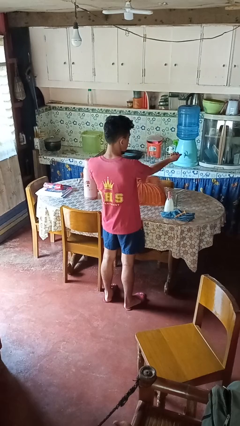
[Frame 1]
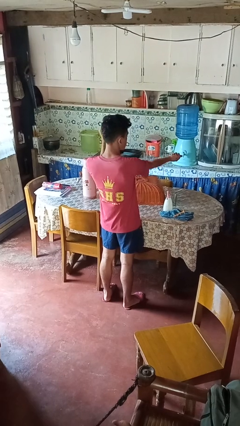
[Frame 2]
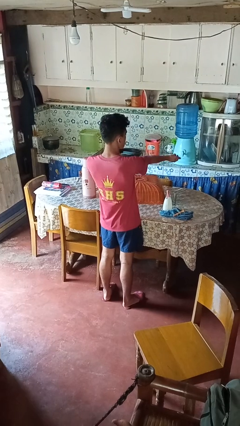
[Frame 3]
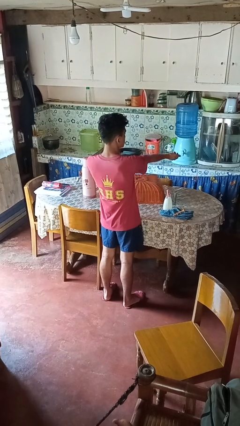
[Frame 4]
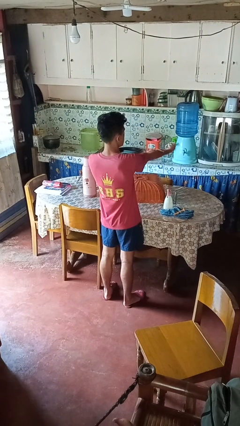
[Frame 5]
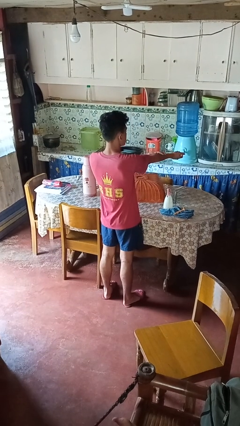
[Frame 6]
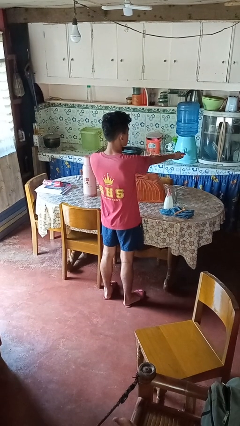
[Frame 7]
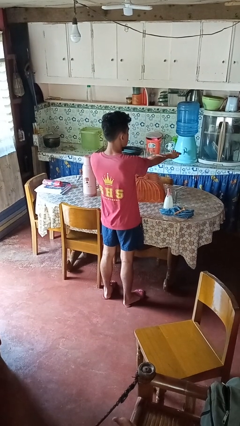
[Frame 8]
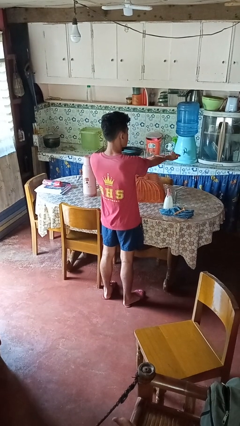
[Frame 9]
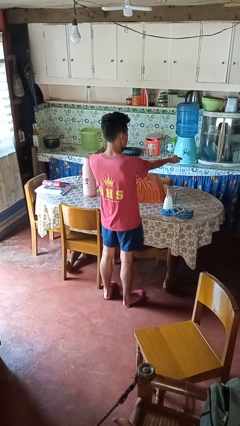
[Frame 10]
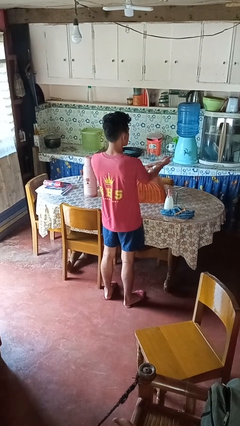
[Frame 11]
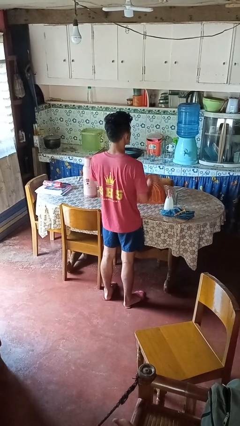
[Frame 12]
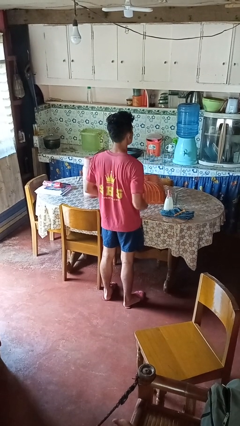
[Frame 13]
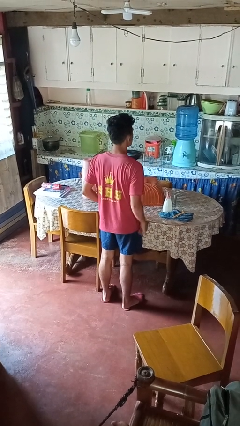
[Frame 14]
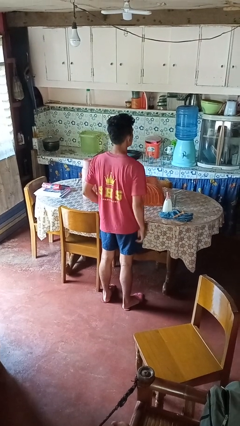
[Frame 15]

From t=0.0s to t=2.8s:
person swats bug

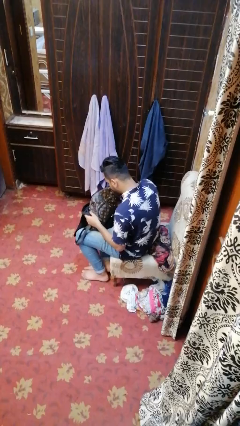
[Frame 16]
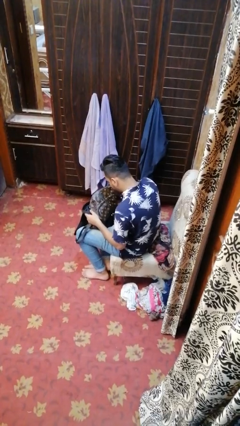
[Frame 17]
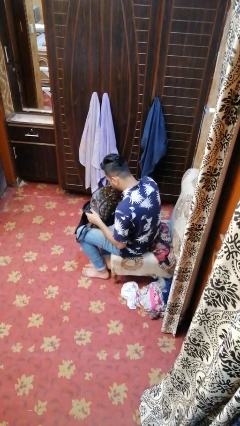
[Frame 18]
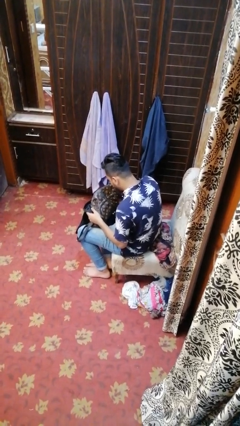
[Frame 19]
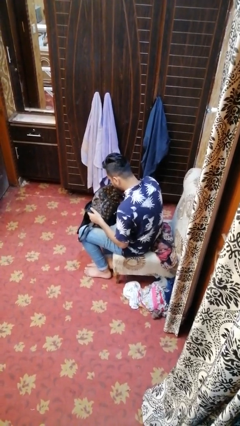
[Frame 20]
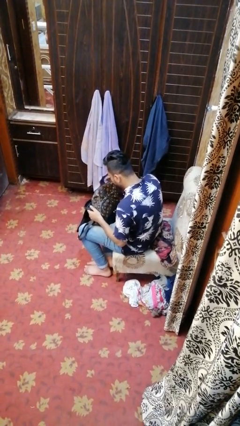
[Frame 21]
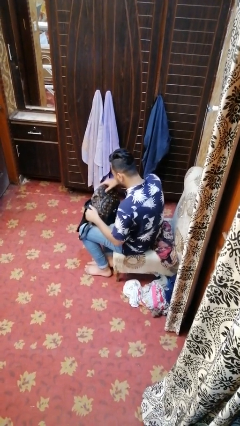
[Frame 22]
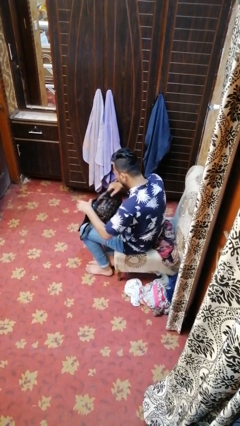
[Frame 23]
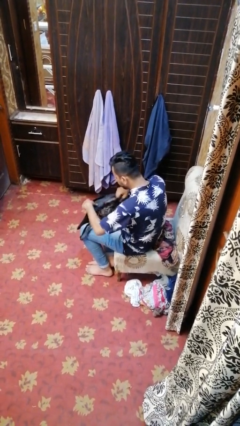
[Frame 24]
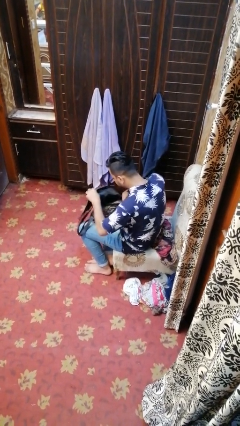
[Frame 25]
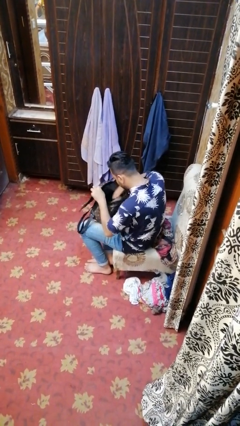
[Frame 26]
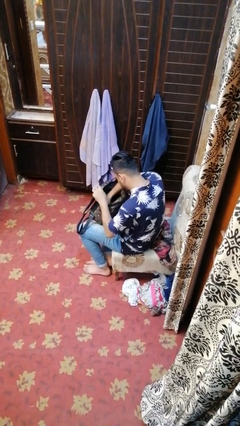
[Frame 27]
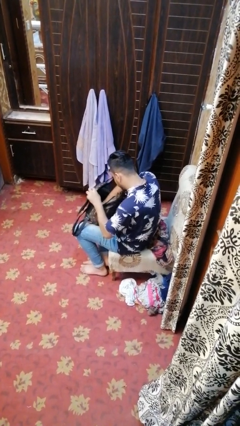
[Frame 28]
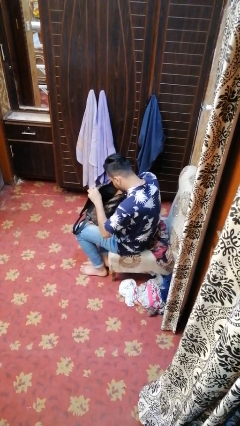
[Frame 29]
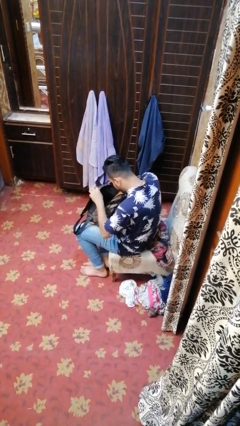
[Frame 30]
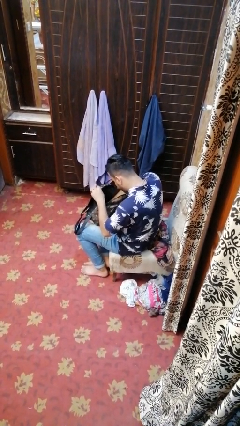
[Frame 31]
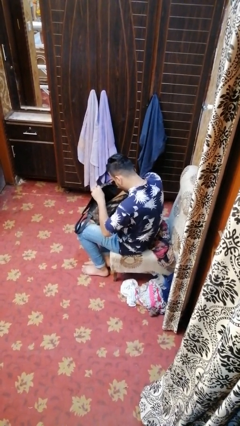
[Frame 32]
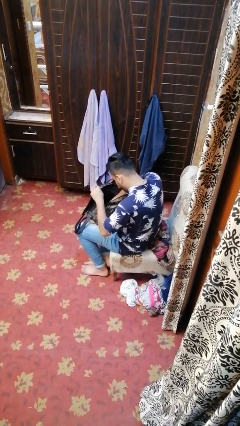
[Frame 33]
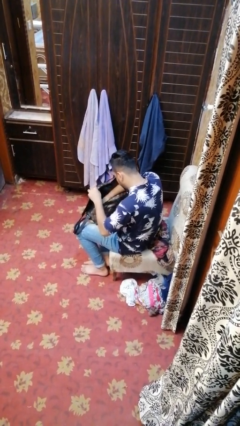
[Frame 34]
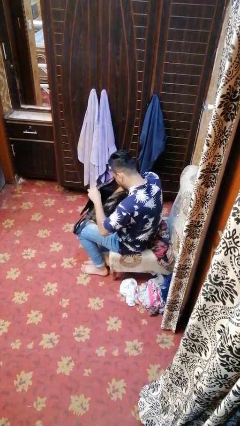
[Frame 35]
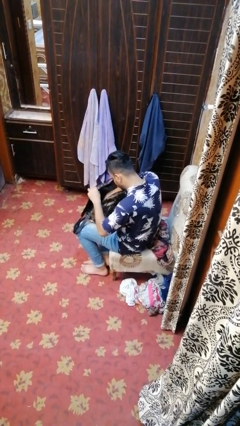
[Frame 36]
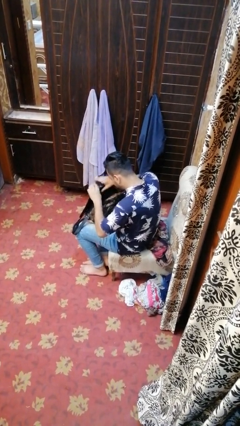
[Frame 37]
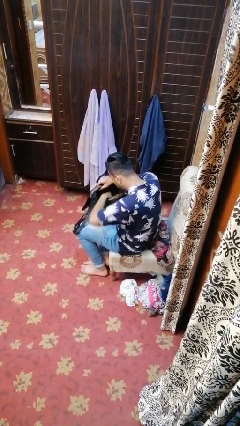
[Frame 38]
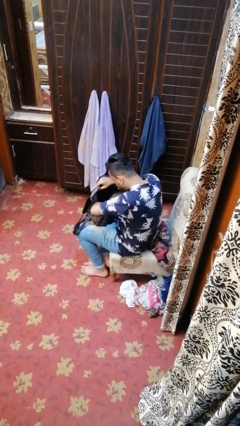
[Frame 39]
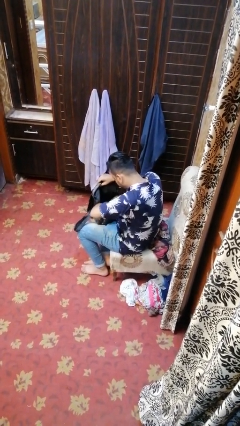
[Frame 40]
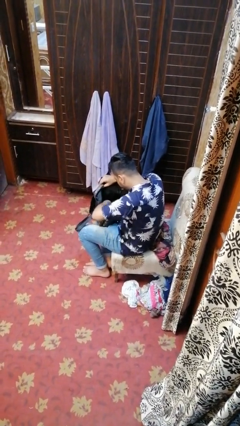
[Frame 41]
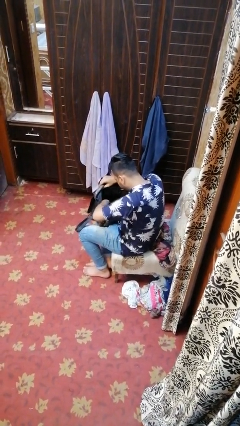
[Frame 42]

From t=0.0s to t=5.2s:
person searches in backpack

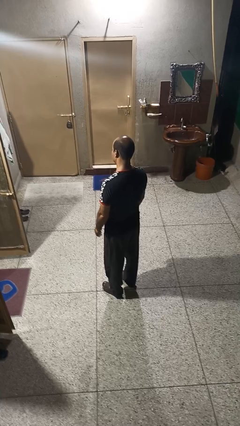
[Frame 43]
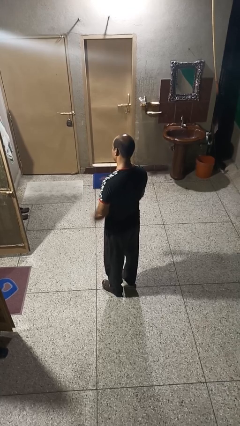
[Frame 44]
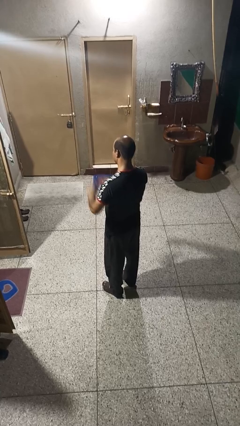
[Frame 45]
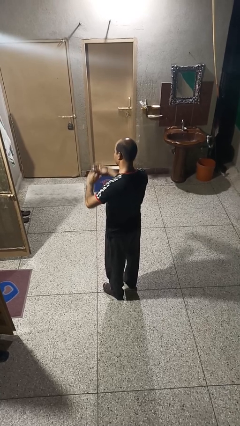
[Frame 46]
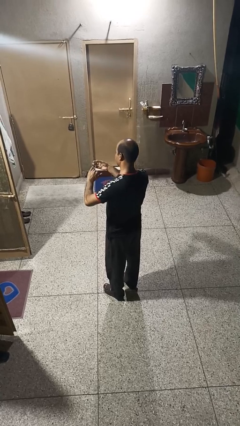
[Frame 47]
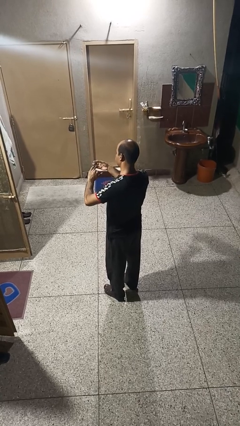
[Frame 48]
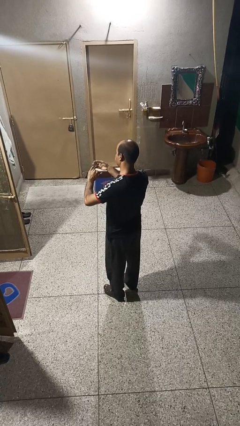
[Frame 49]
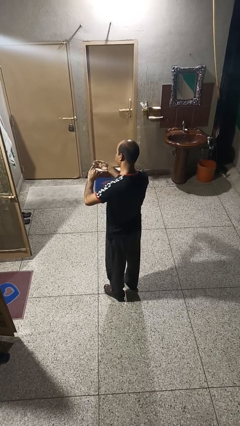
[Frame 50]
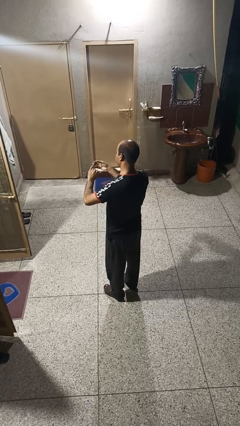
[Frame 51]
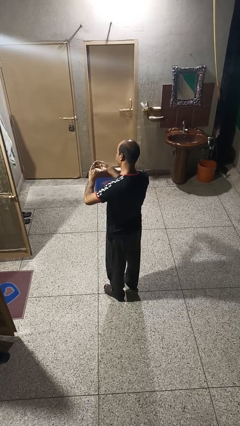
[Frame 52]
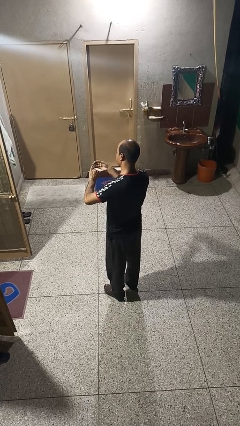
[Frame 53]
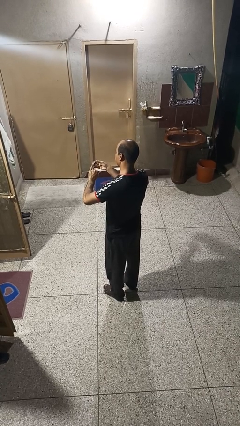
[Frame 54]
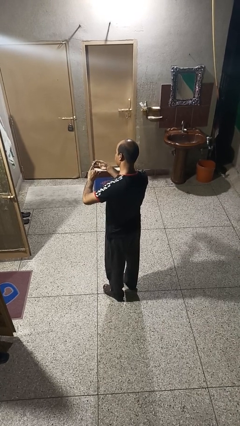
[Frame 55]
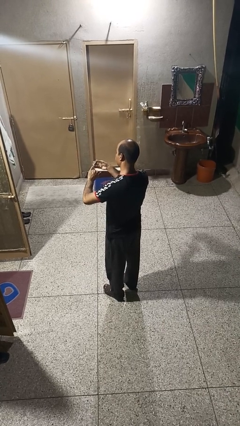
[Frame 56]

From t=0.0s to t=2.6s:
person clips fingernails

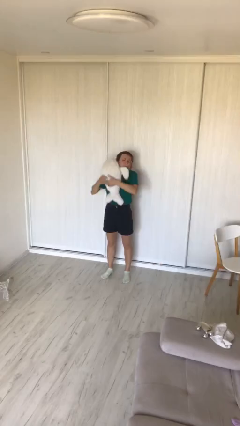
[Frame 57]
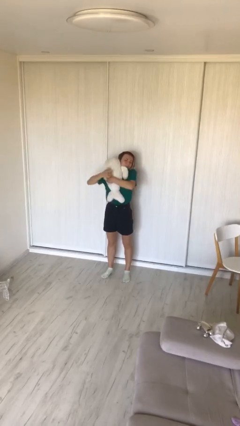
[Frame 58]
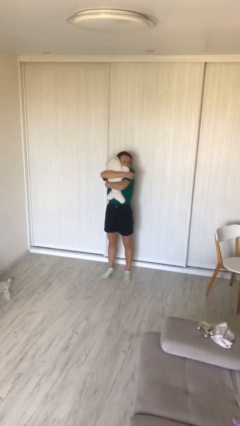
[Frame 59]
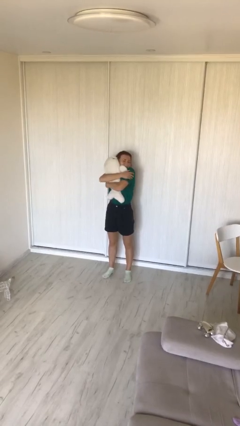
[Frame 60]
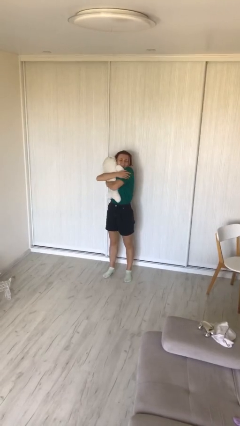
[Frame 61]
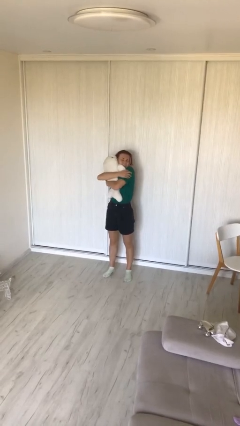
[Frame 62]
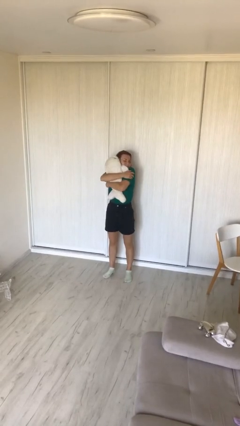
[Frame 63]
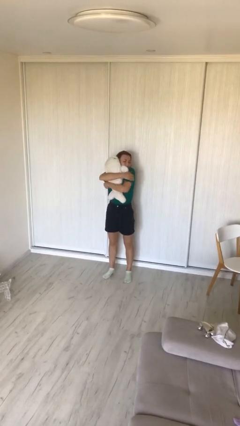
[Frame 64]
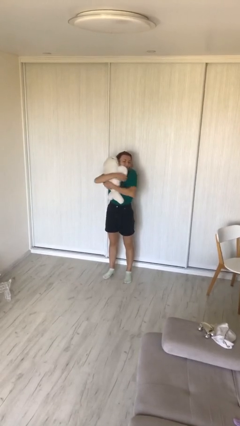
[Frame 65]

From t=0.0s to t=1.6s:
person hugs stuffed animal

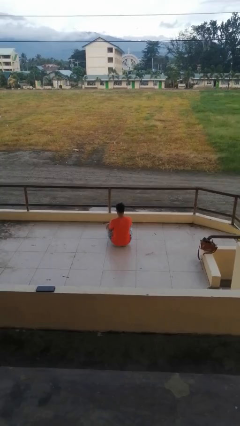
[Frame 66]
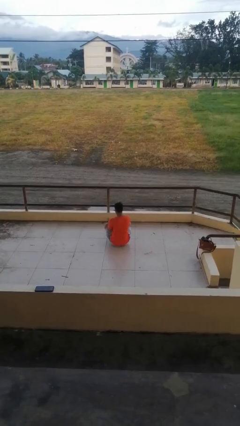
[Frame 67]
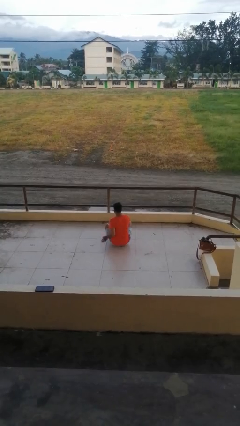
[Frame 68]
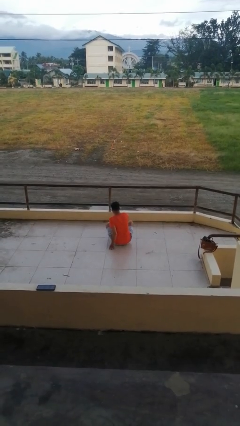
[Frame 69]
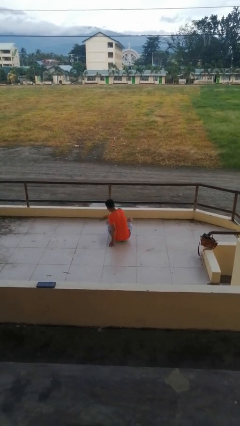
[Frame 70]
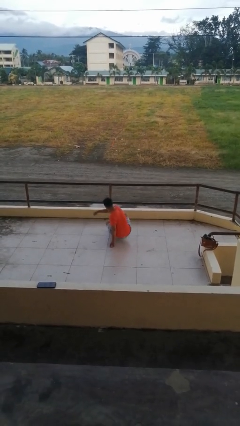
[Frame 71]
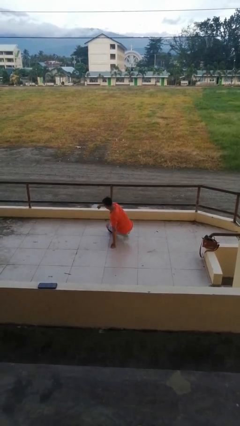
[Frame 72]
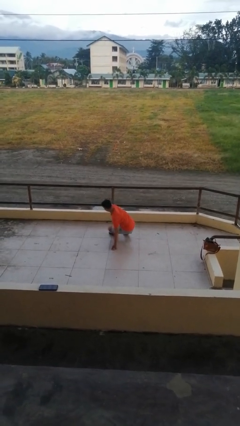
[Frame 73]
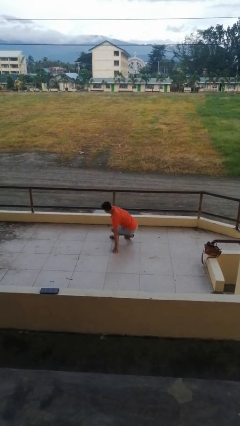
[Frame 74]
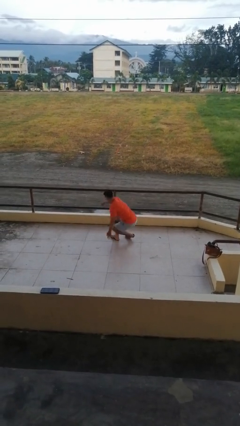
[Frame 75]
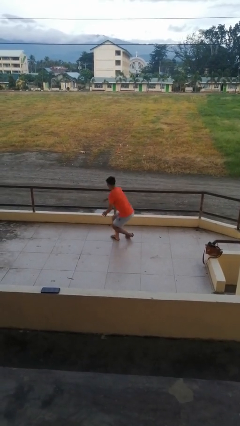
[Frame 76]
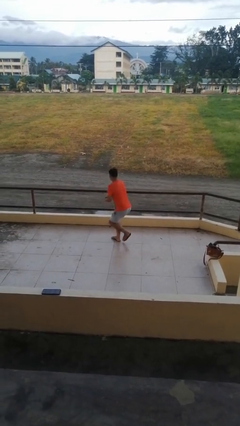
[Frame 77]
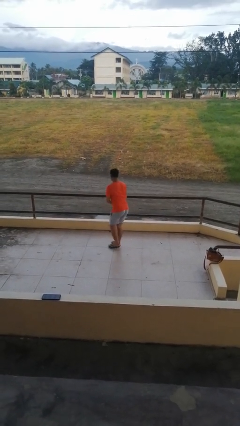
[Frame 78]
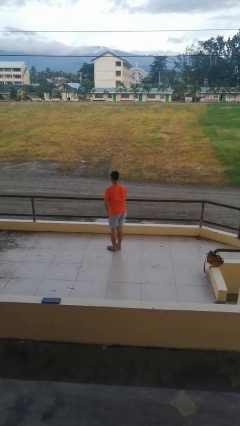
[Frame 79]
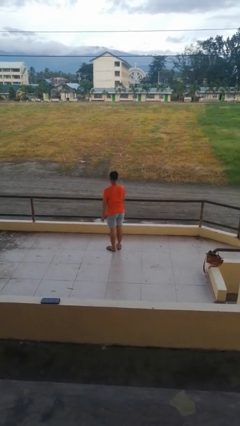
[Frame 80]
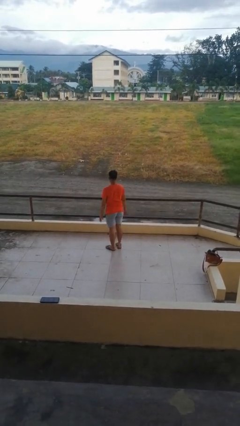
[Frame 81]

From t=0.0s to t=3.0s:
person stands up from floor

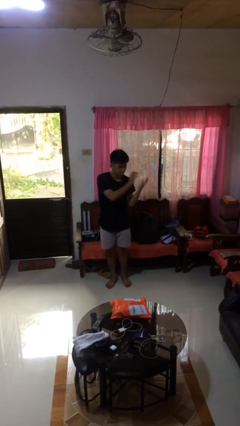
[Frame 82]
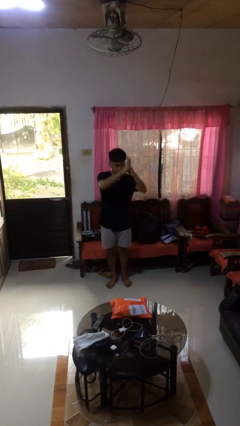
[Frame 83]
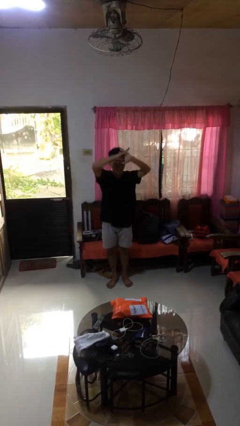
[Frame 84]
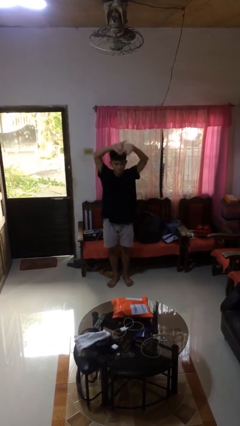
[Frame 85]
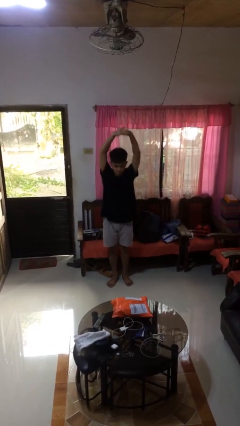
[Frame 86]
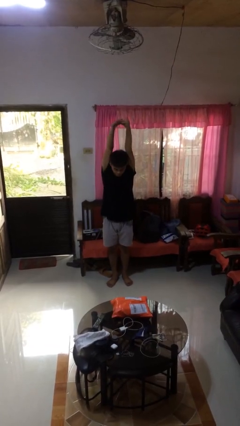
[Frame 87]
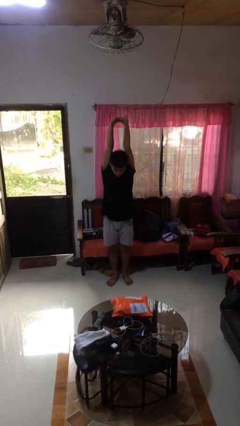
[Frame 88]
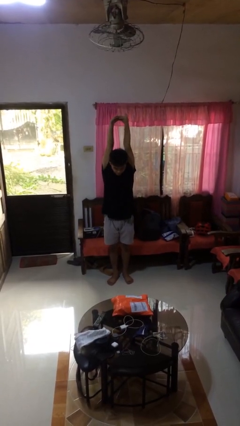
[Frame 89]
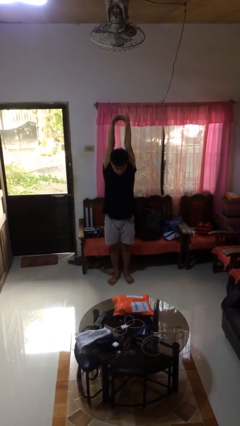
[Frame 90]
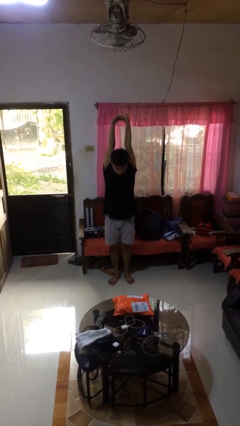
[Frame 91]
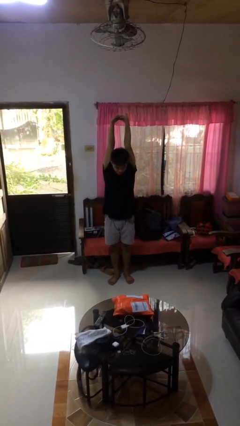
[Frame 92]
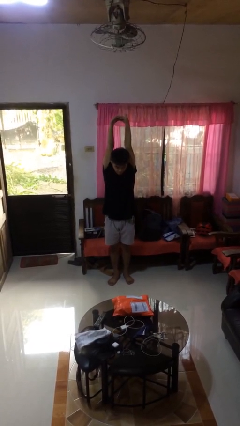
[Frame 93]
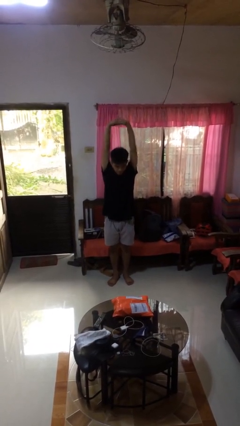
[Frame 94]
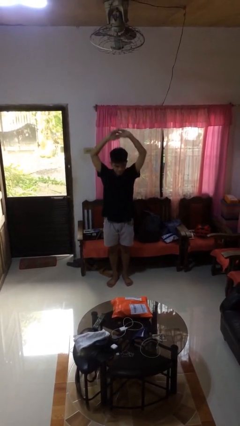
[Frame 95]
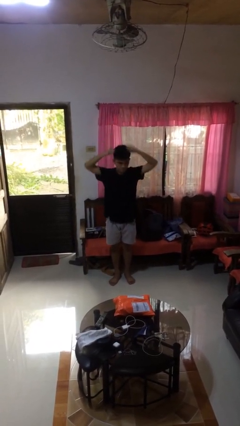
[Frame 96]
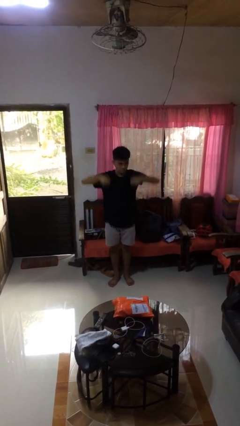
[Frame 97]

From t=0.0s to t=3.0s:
person stretches arms over head
